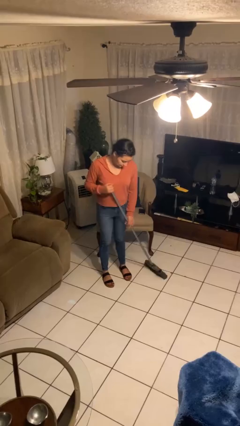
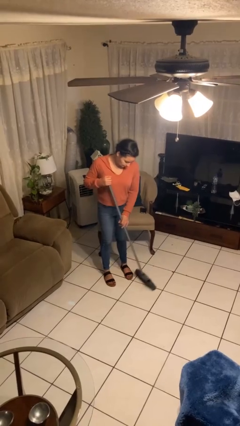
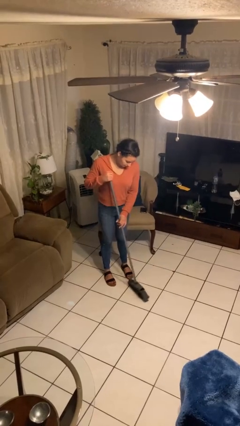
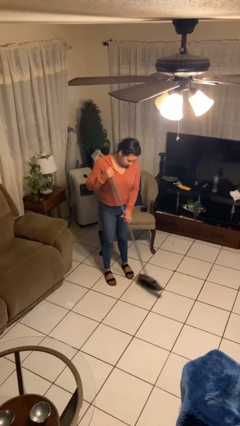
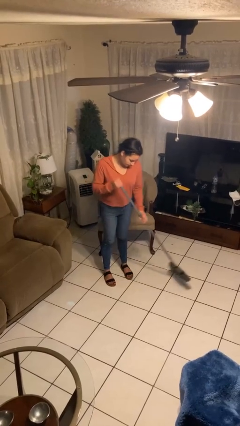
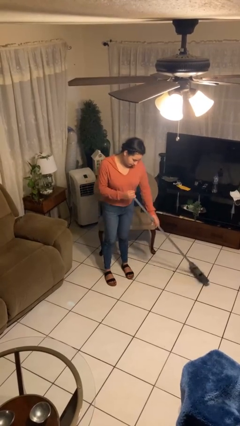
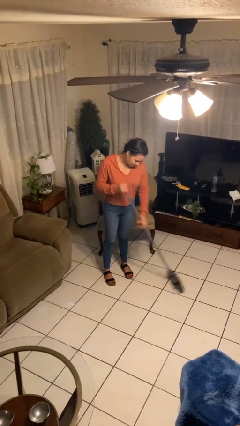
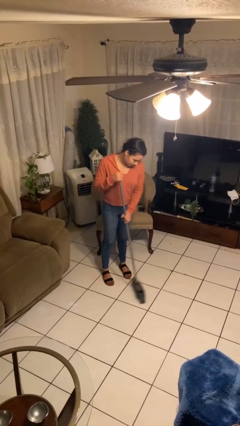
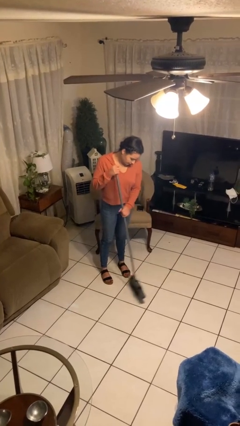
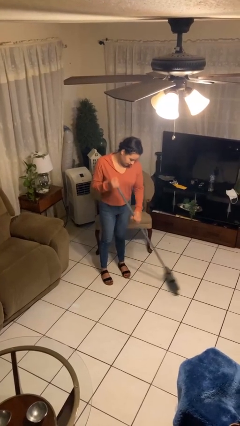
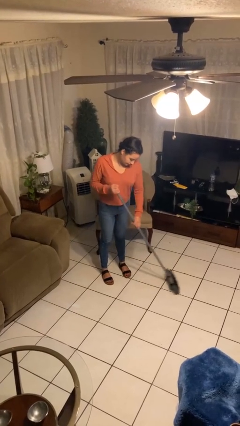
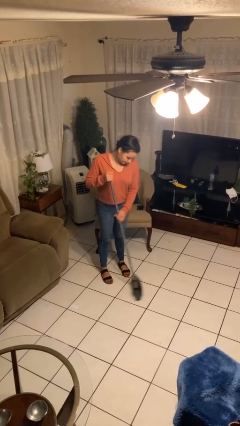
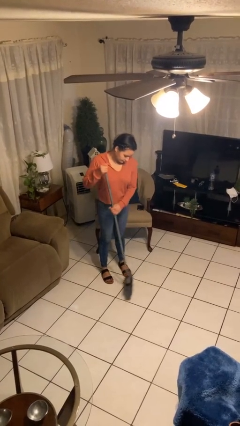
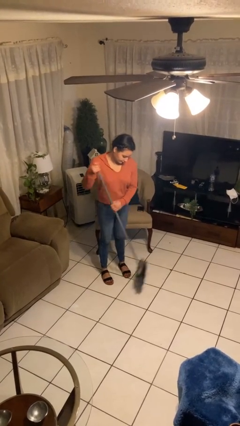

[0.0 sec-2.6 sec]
person sweeps floor

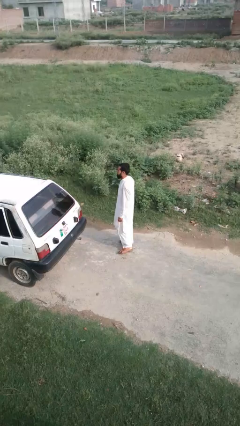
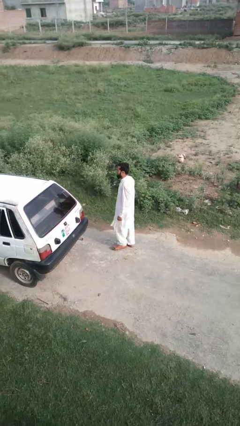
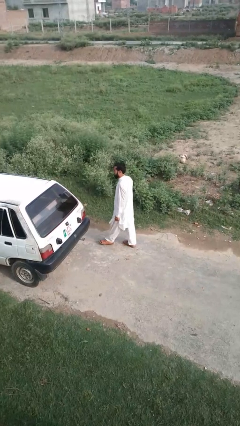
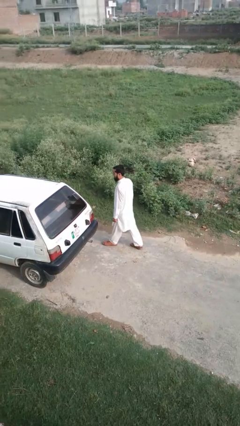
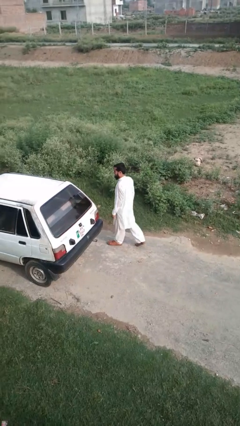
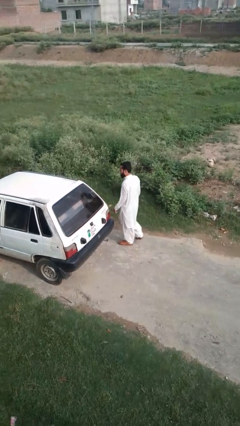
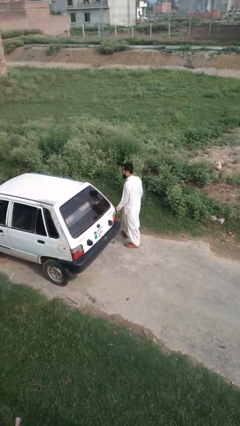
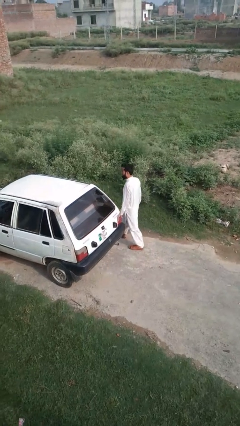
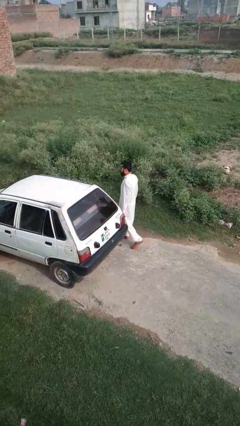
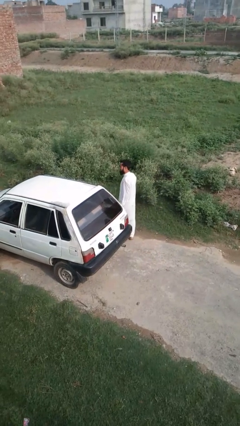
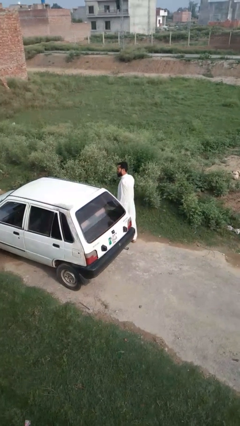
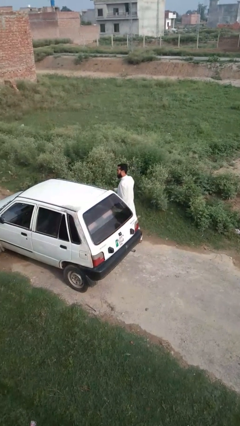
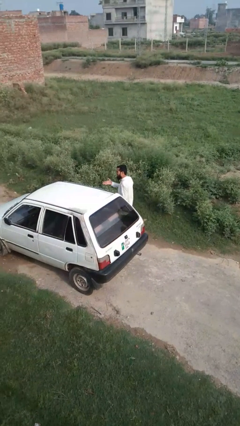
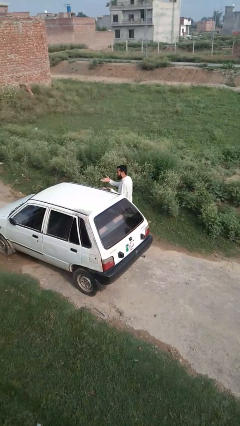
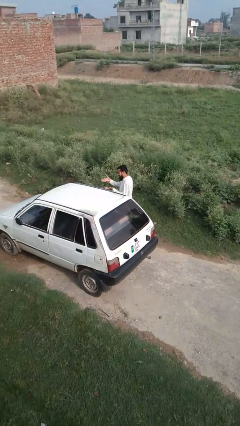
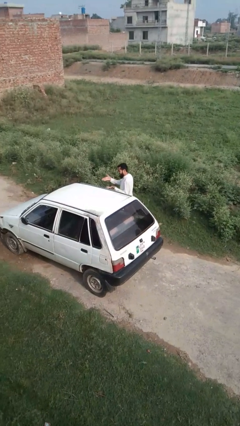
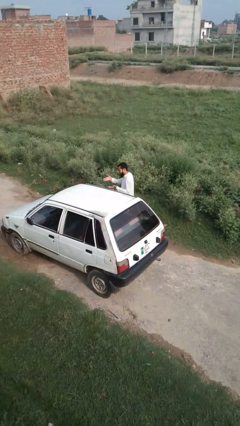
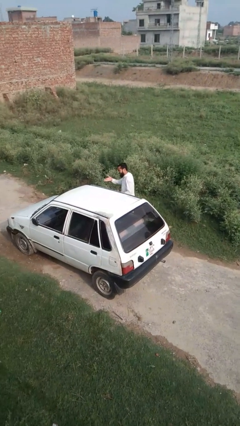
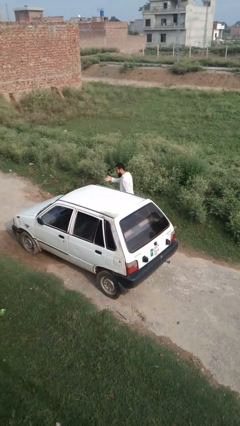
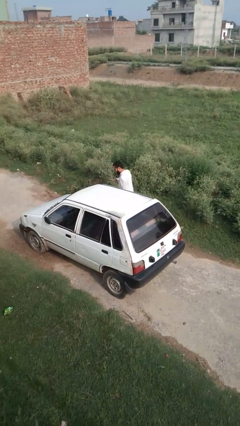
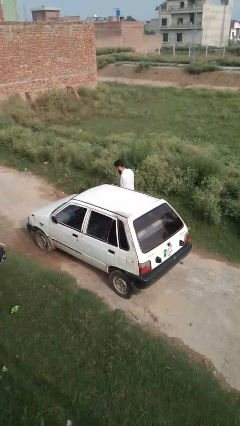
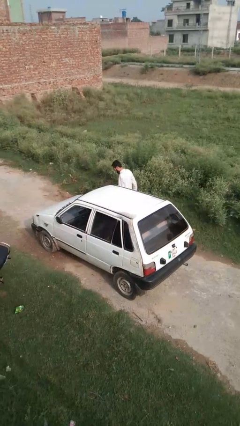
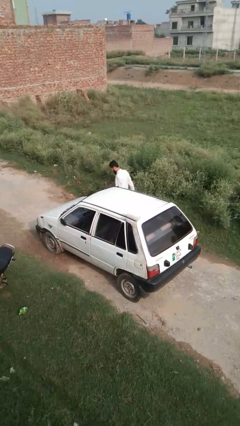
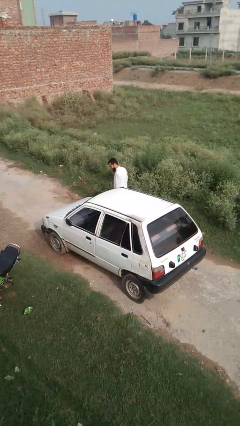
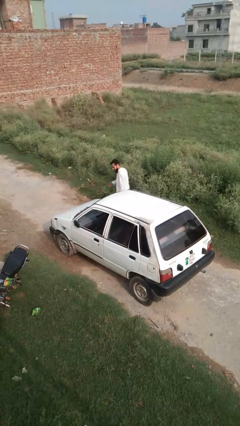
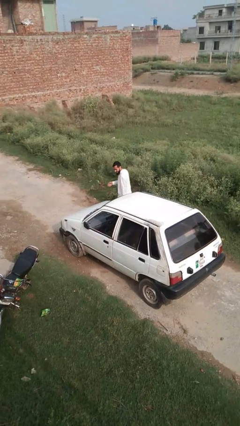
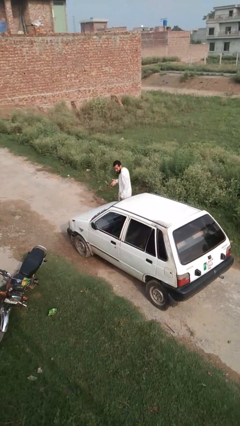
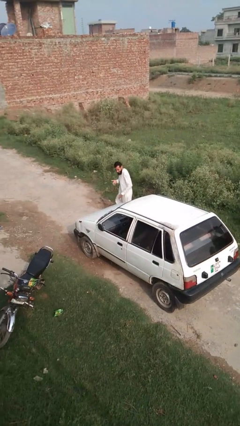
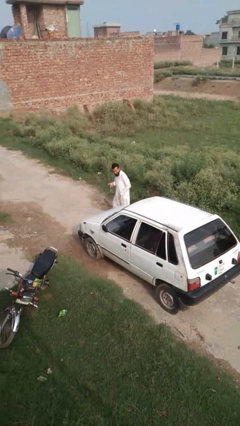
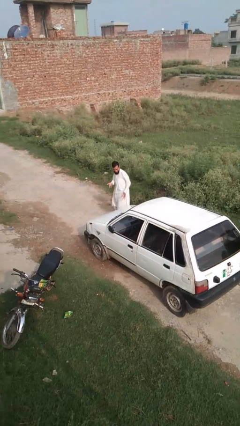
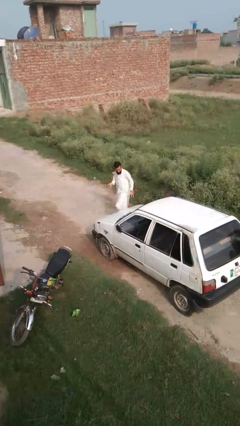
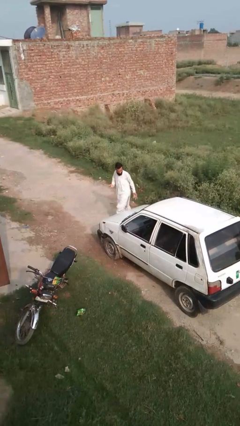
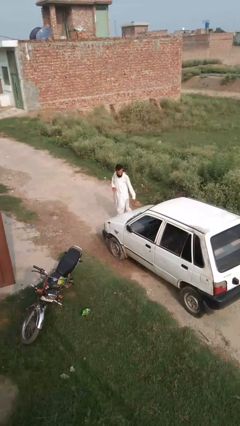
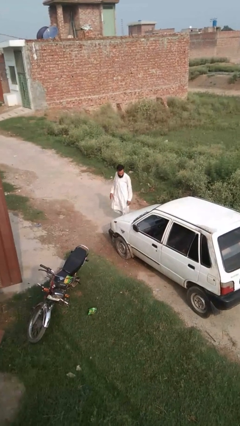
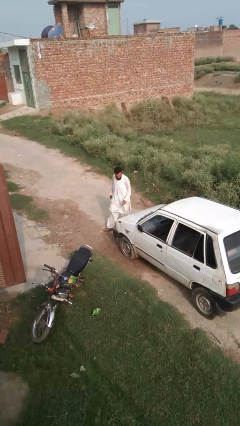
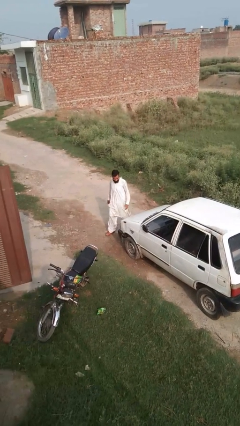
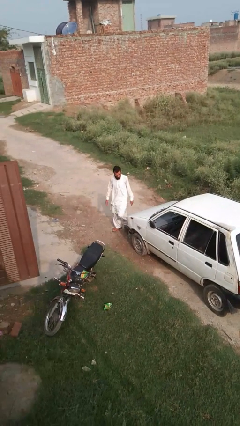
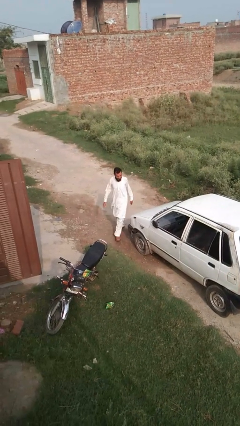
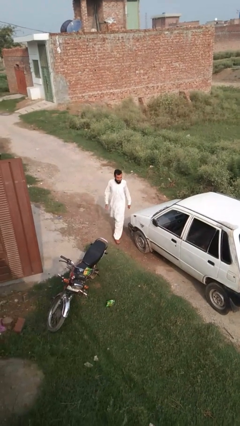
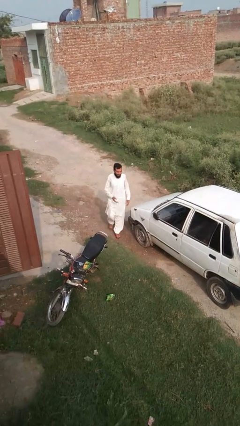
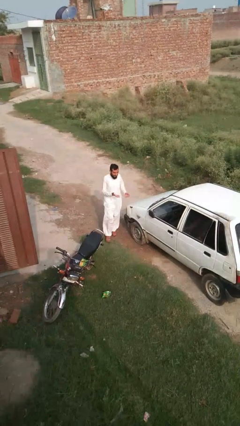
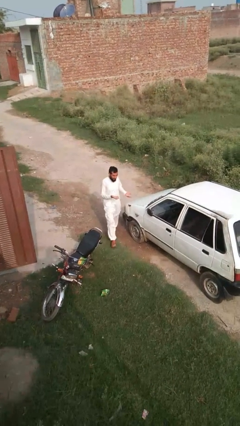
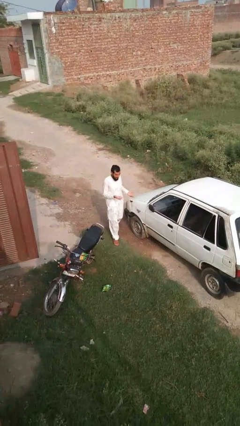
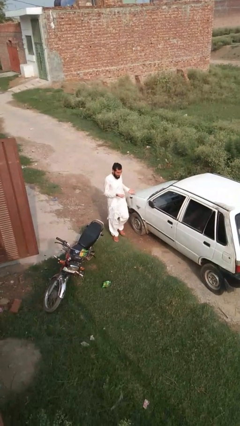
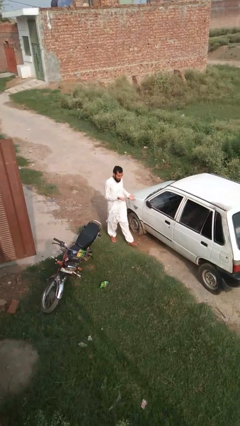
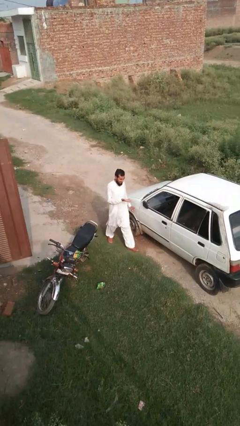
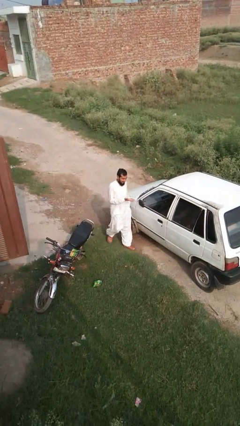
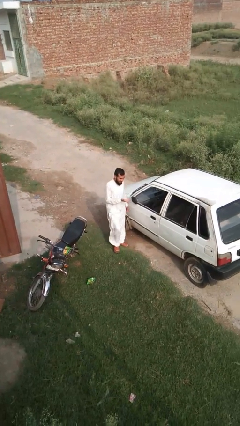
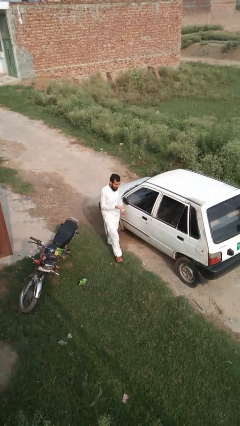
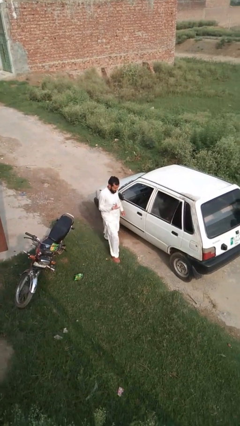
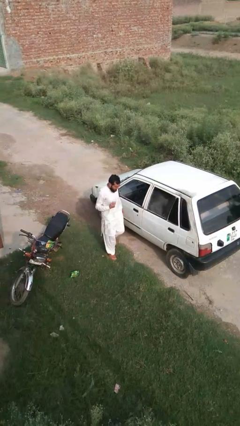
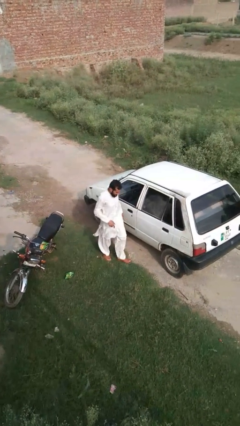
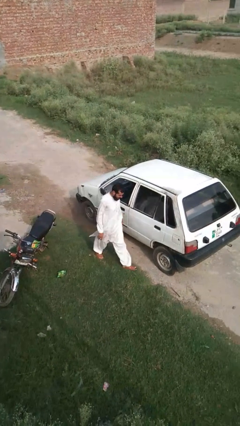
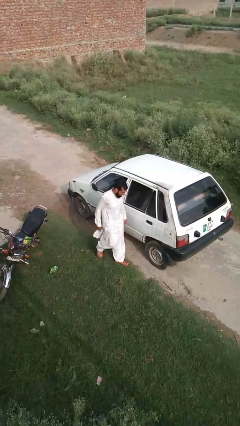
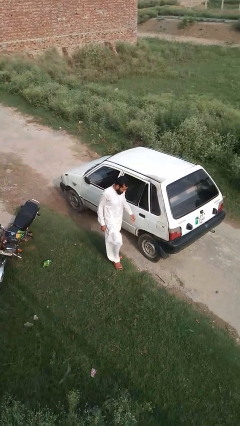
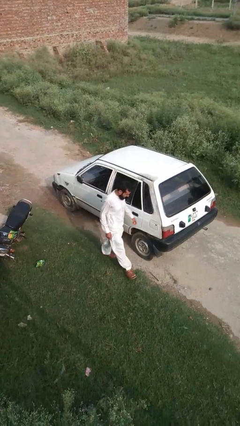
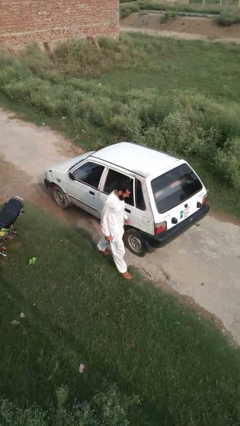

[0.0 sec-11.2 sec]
person walks around car

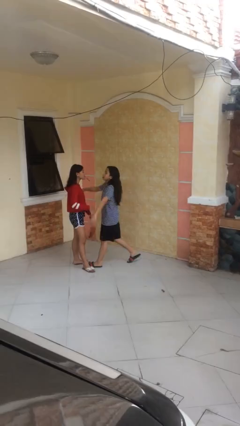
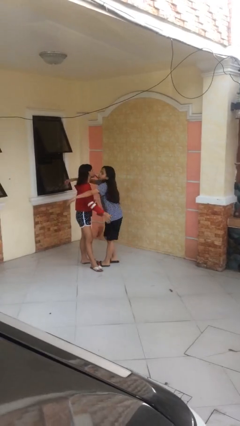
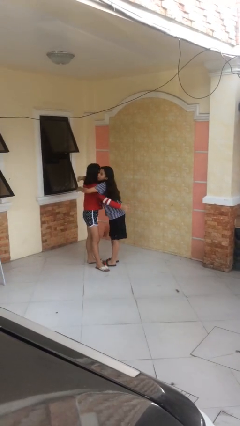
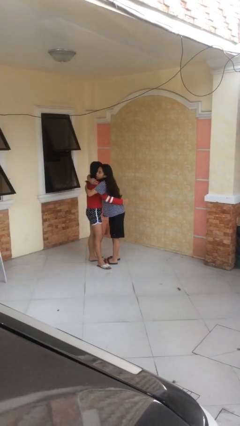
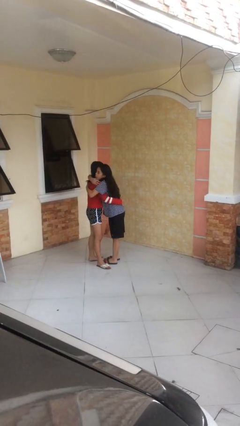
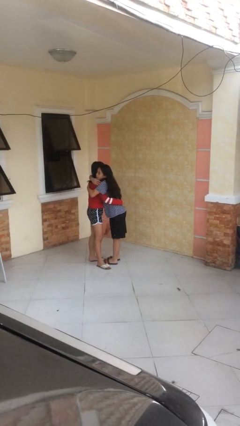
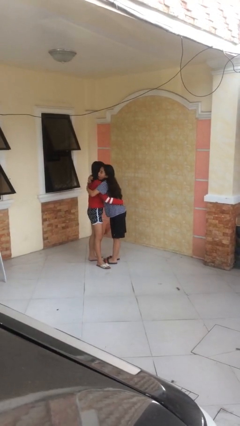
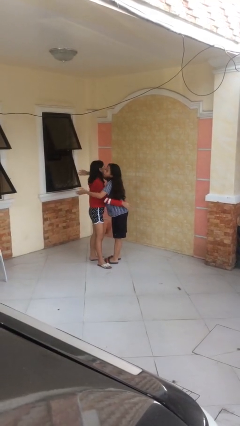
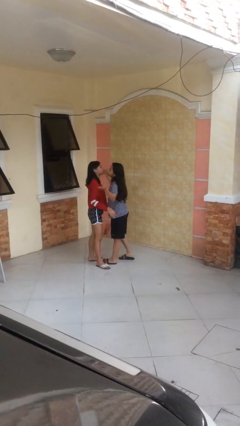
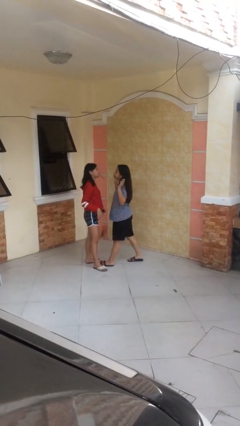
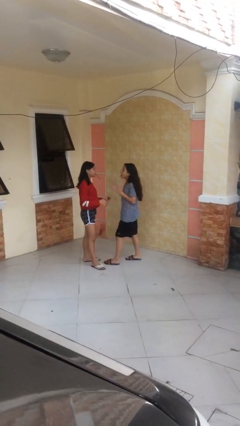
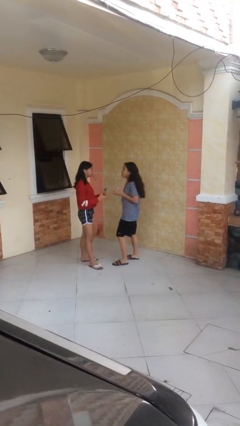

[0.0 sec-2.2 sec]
person embraces person

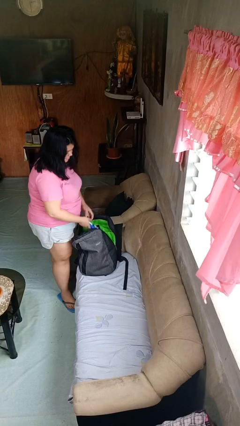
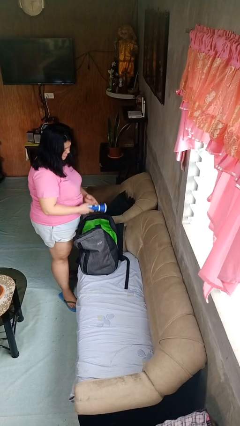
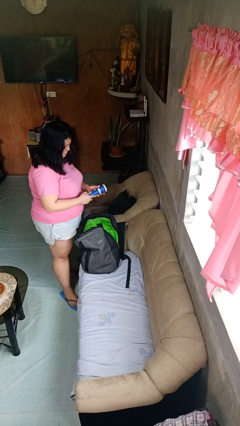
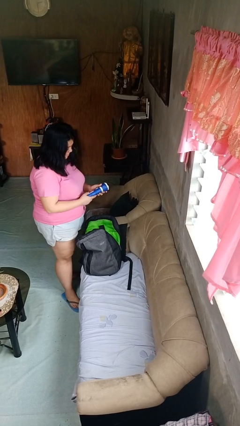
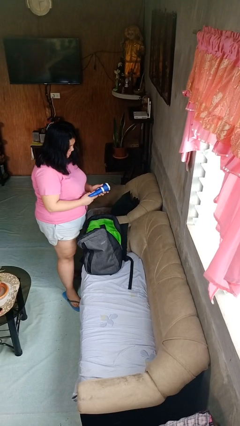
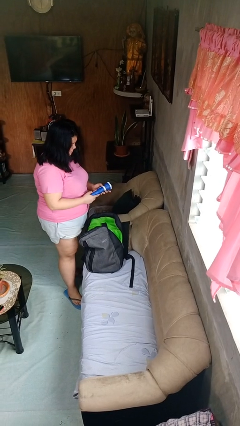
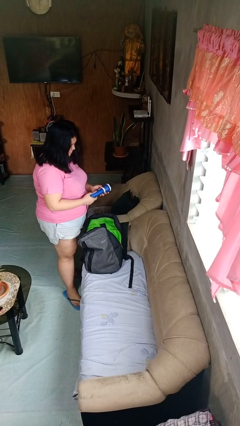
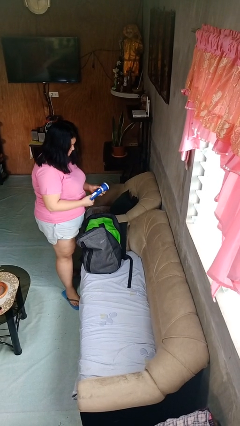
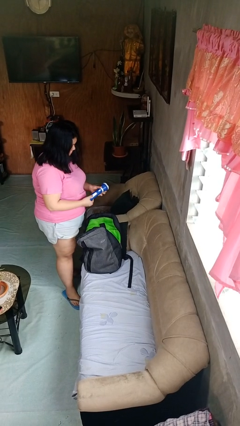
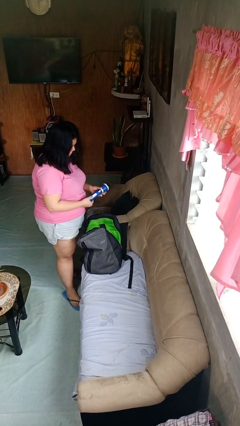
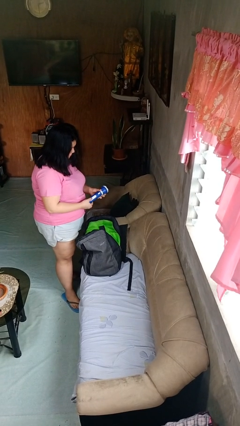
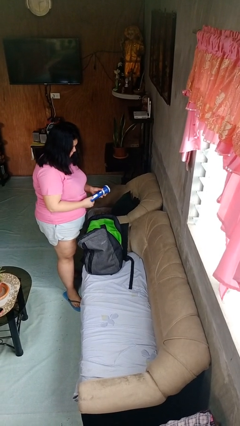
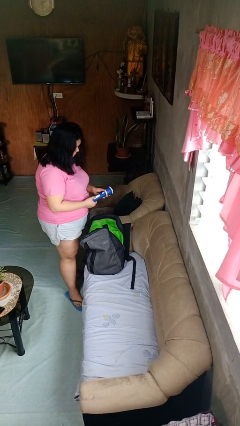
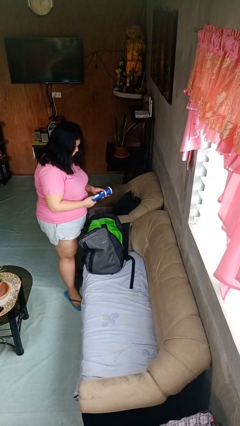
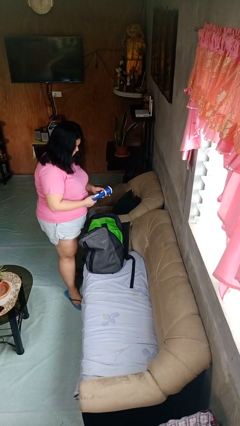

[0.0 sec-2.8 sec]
person takes object from backpack
